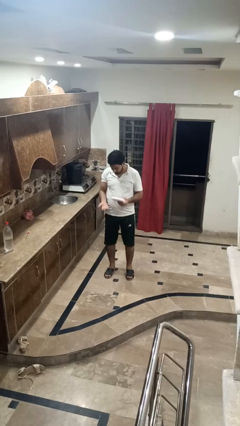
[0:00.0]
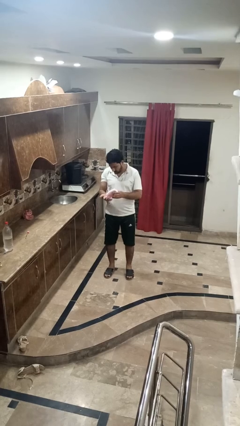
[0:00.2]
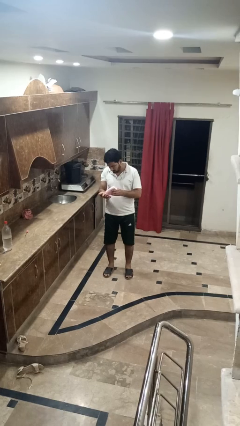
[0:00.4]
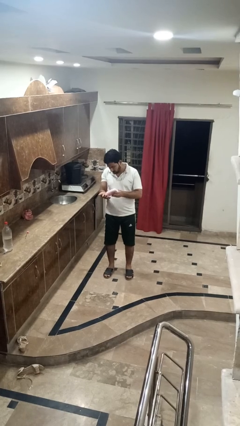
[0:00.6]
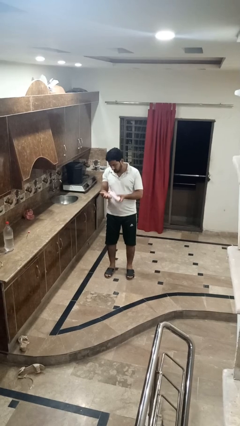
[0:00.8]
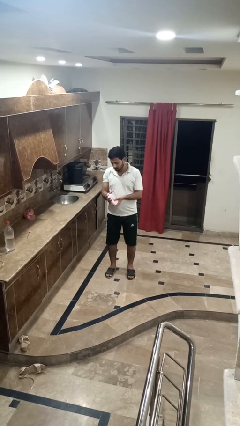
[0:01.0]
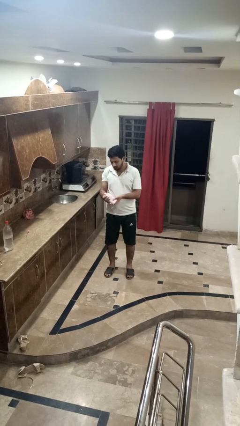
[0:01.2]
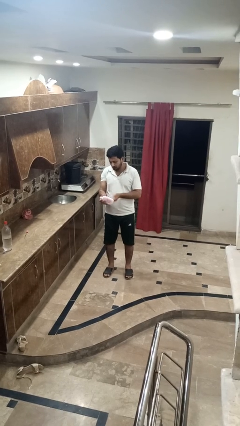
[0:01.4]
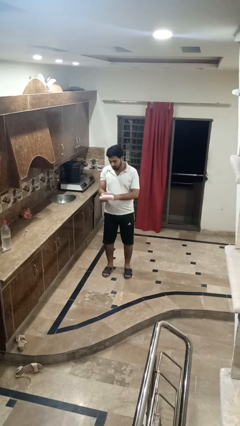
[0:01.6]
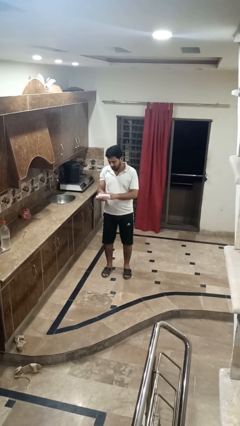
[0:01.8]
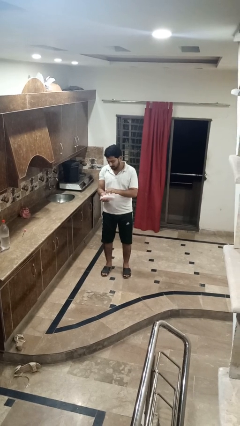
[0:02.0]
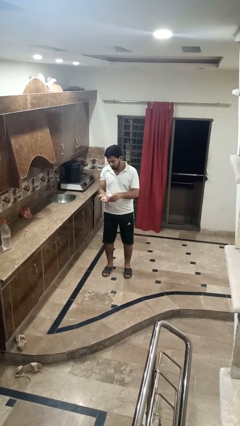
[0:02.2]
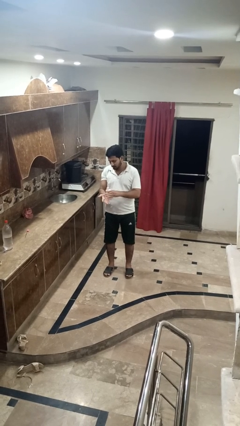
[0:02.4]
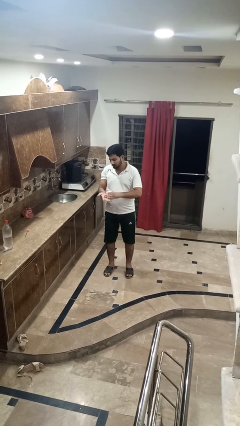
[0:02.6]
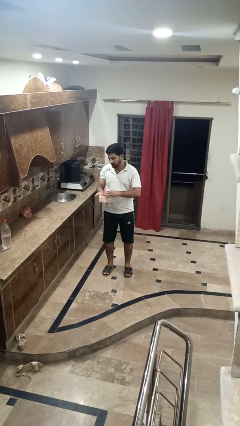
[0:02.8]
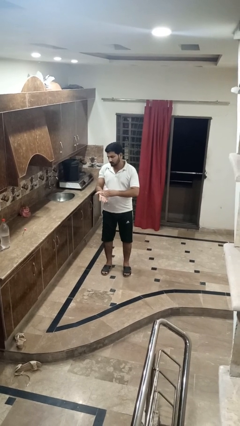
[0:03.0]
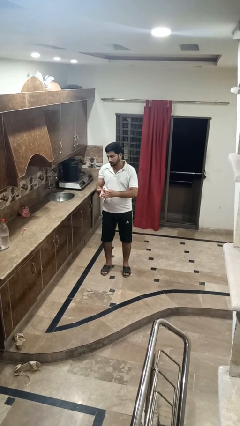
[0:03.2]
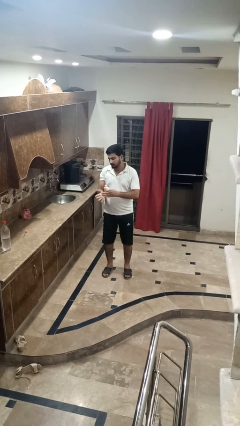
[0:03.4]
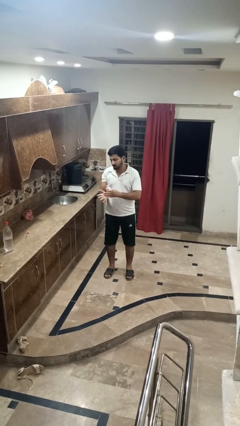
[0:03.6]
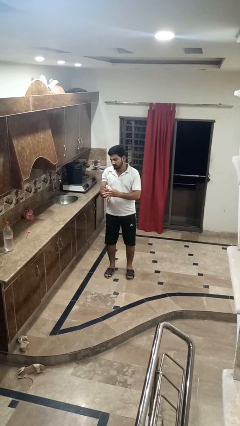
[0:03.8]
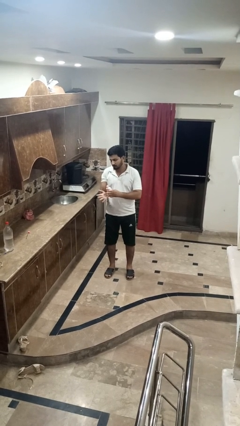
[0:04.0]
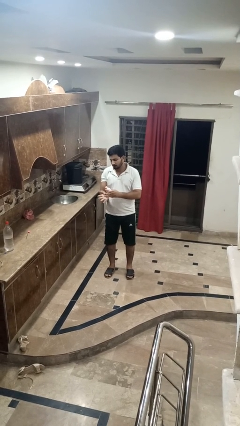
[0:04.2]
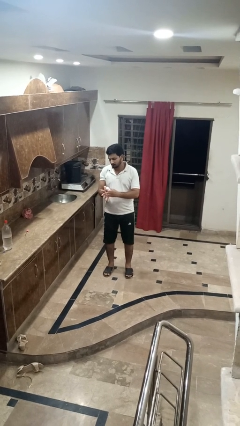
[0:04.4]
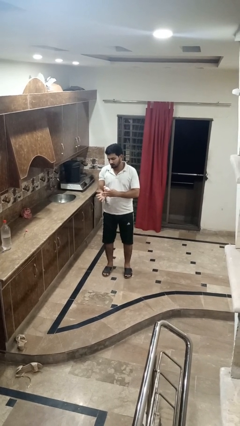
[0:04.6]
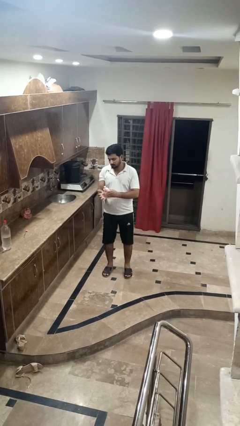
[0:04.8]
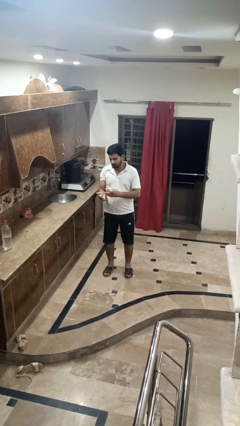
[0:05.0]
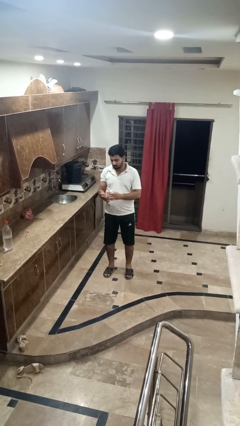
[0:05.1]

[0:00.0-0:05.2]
person applies sunscreen

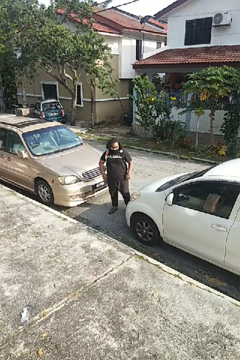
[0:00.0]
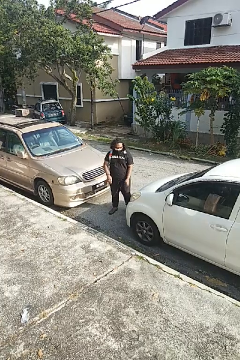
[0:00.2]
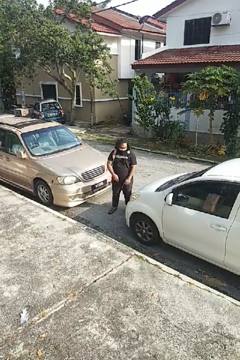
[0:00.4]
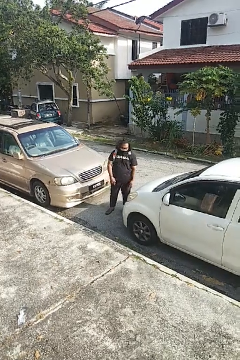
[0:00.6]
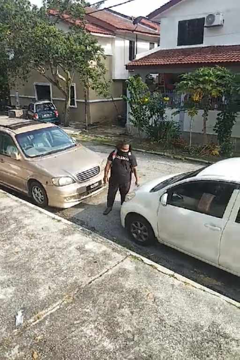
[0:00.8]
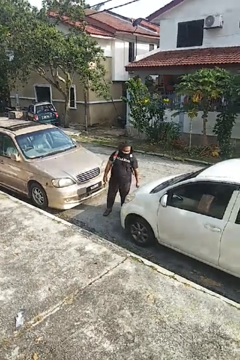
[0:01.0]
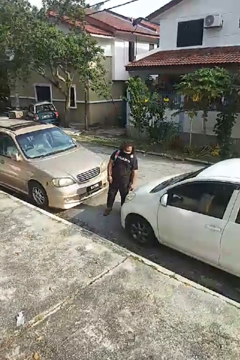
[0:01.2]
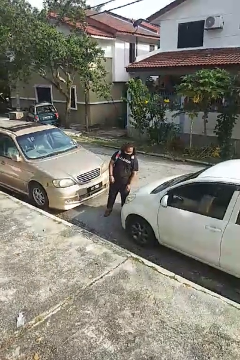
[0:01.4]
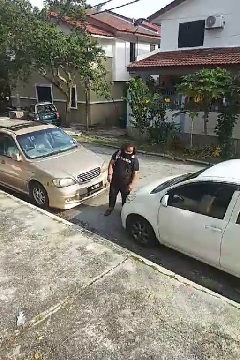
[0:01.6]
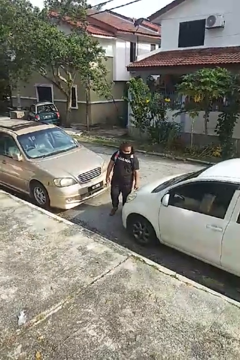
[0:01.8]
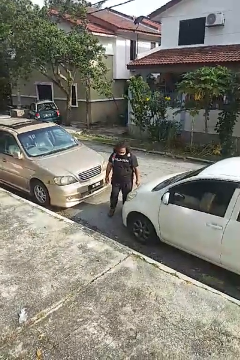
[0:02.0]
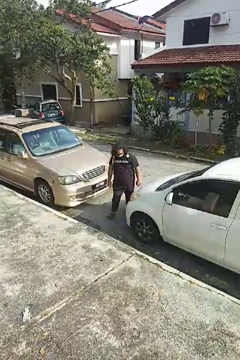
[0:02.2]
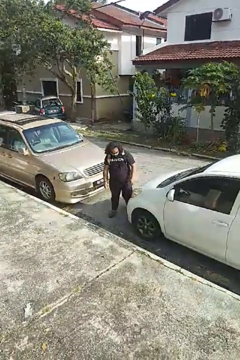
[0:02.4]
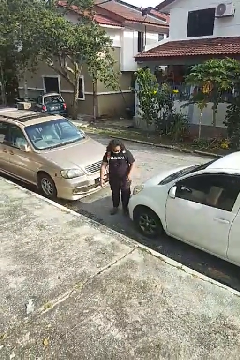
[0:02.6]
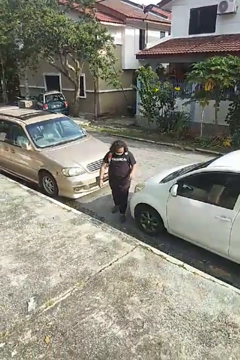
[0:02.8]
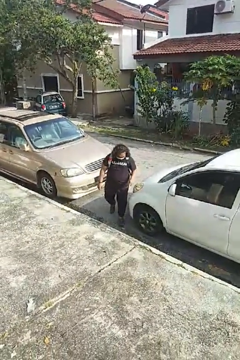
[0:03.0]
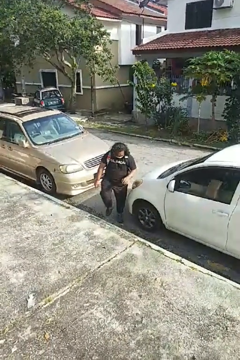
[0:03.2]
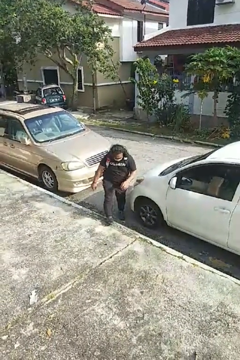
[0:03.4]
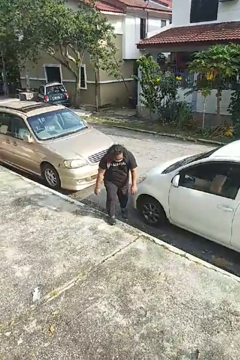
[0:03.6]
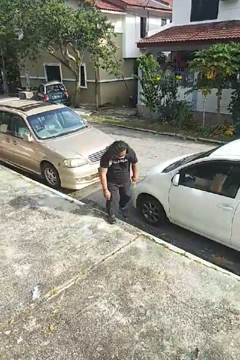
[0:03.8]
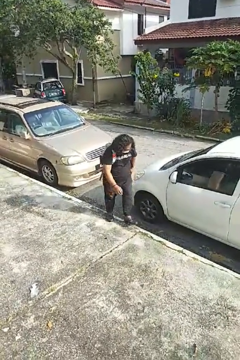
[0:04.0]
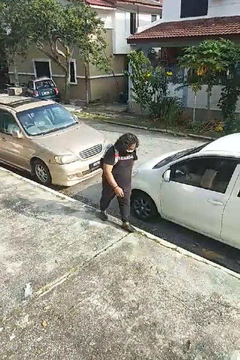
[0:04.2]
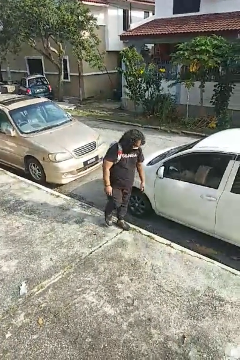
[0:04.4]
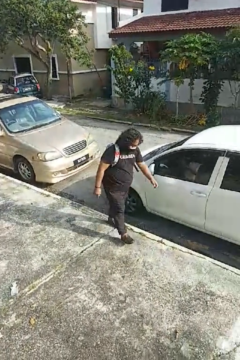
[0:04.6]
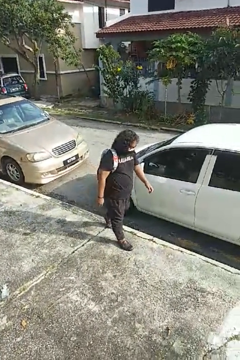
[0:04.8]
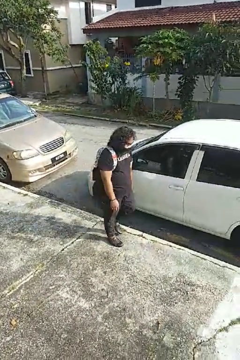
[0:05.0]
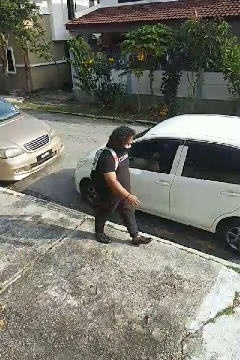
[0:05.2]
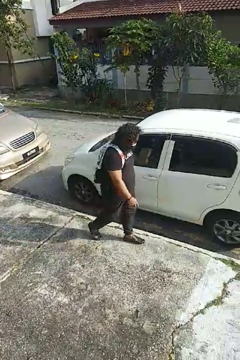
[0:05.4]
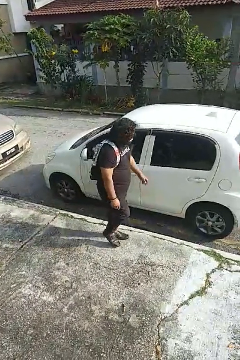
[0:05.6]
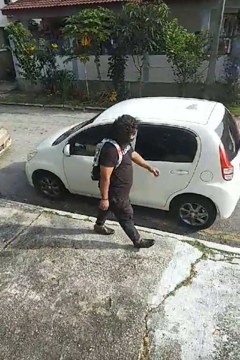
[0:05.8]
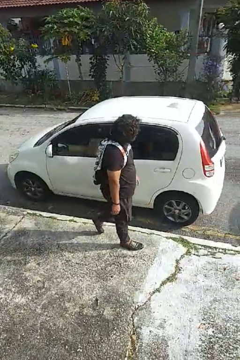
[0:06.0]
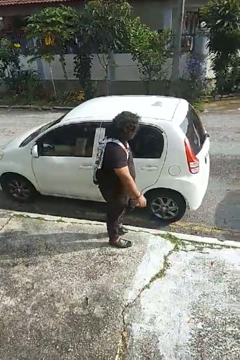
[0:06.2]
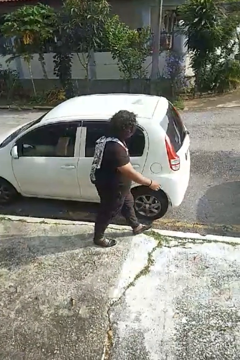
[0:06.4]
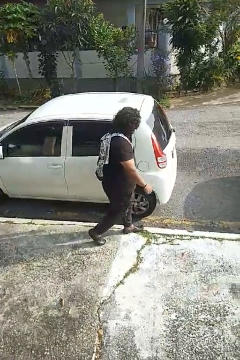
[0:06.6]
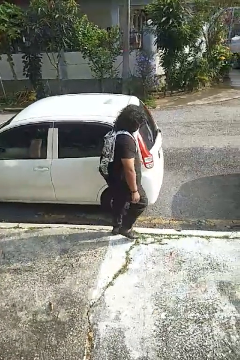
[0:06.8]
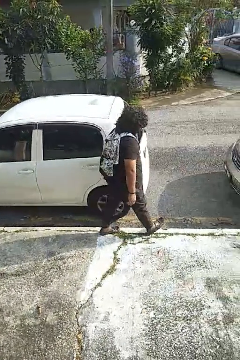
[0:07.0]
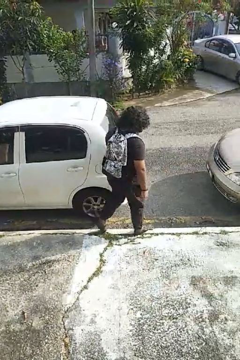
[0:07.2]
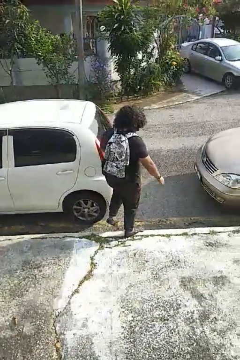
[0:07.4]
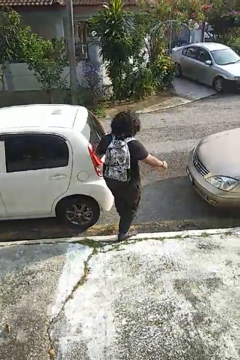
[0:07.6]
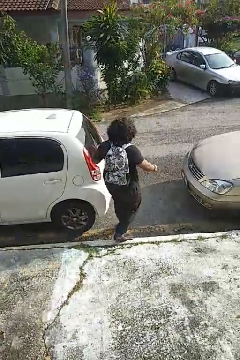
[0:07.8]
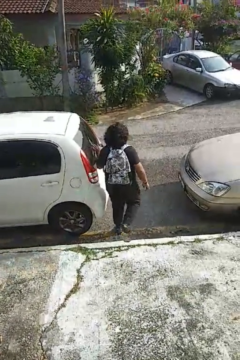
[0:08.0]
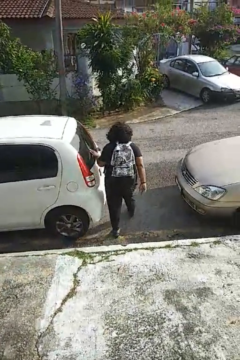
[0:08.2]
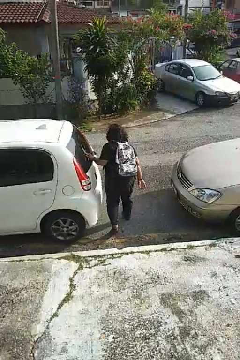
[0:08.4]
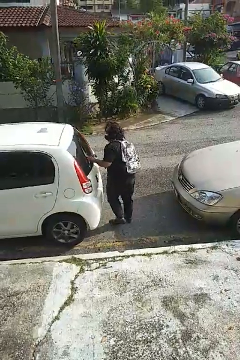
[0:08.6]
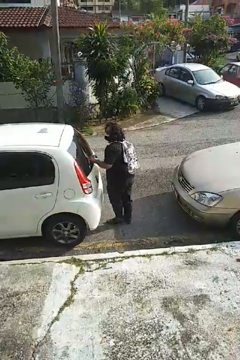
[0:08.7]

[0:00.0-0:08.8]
person walks around car

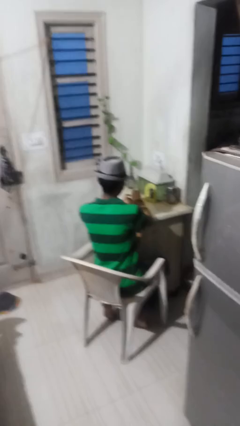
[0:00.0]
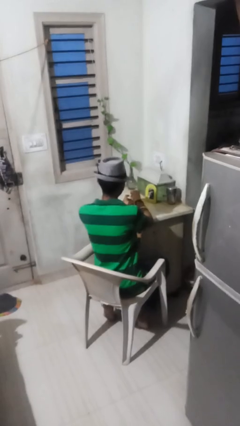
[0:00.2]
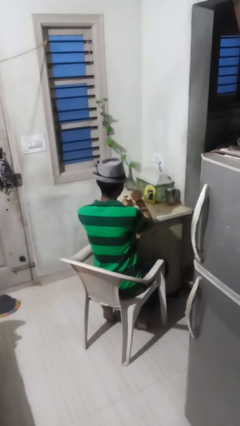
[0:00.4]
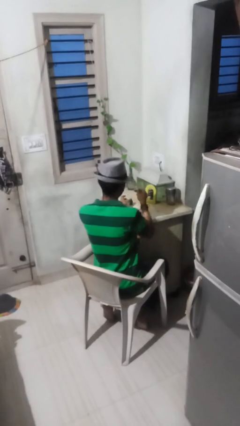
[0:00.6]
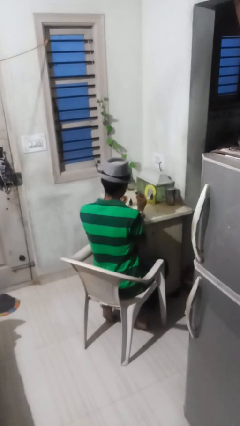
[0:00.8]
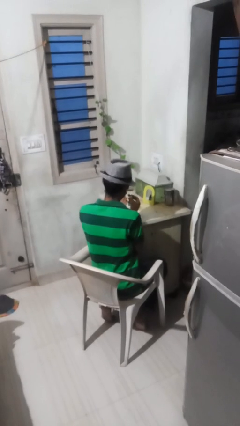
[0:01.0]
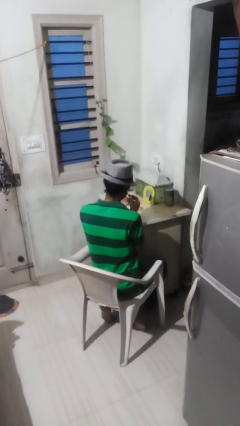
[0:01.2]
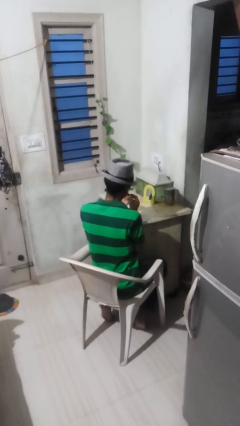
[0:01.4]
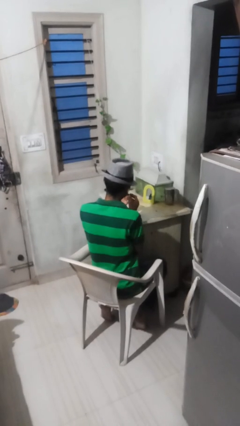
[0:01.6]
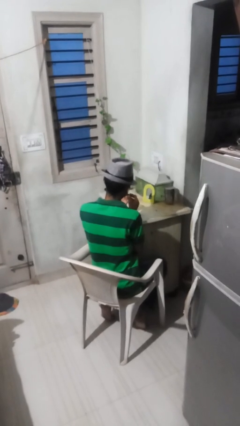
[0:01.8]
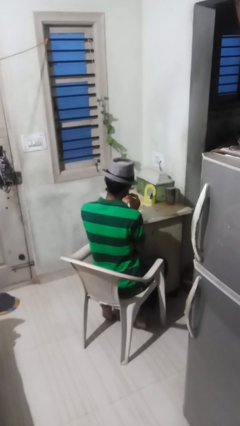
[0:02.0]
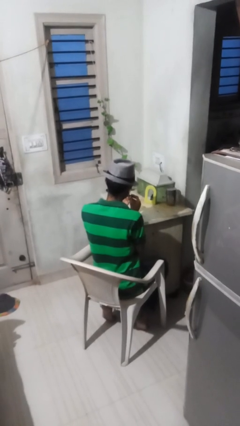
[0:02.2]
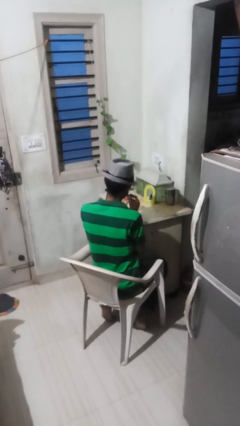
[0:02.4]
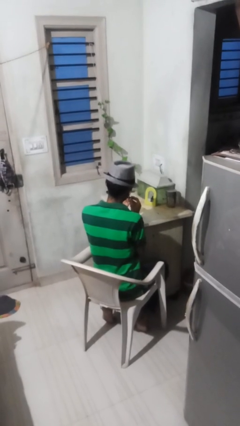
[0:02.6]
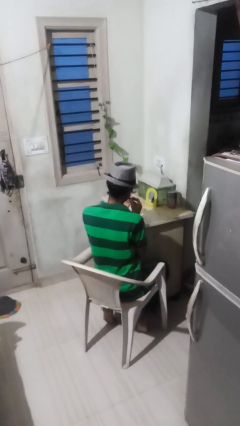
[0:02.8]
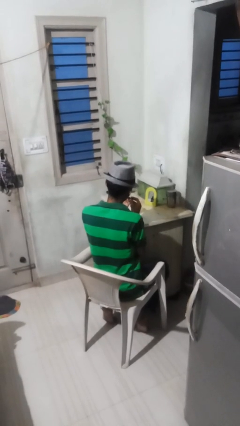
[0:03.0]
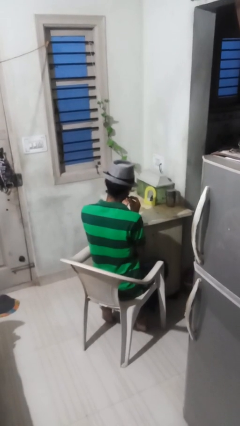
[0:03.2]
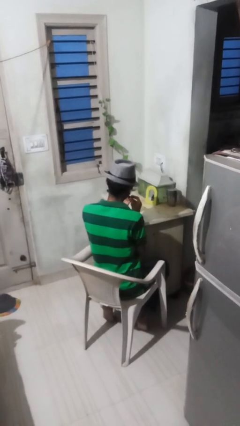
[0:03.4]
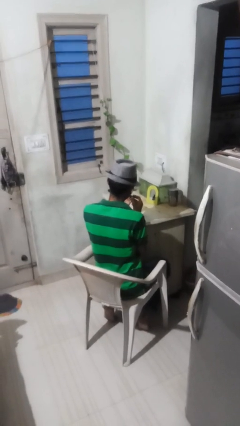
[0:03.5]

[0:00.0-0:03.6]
person paints fingernails

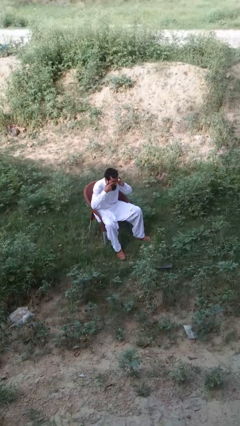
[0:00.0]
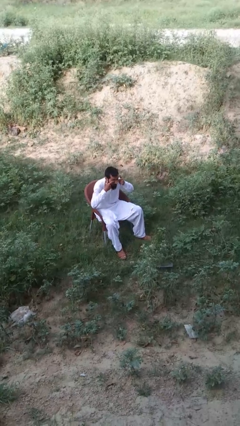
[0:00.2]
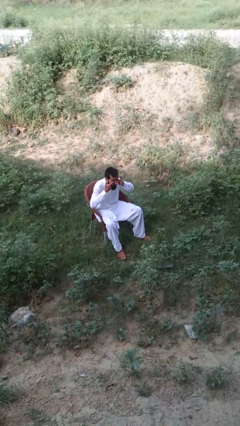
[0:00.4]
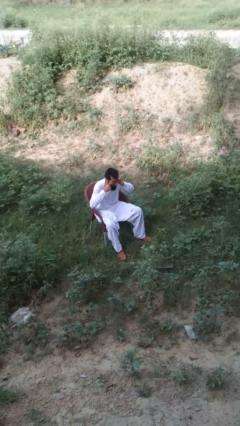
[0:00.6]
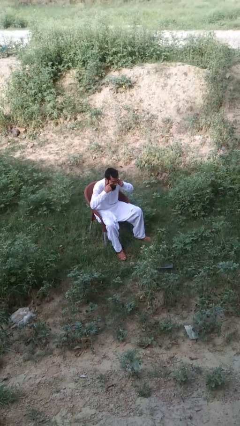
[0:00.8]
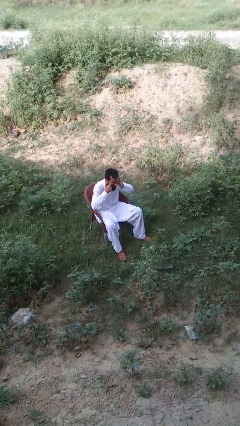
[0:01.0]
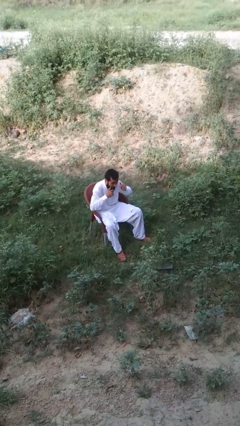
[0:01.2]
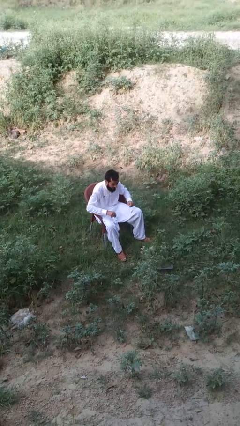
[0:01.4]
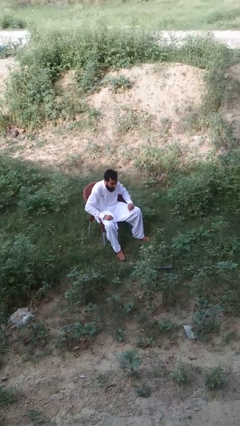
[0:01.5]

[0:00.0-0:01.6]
person rubs eyes
